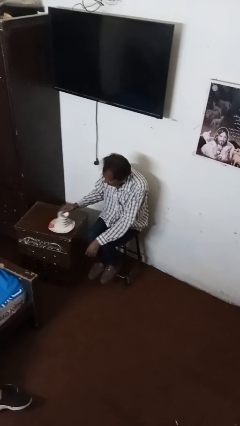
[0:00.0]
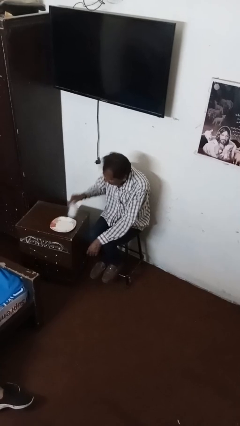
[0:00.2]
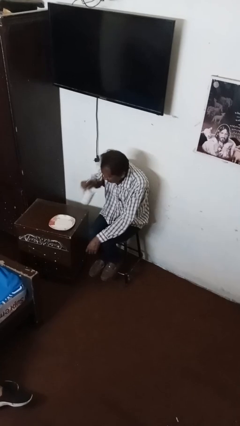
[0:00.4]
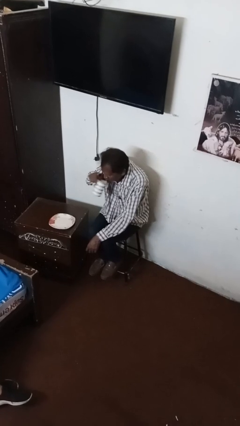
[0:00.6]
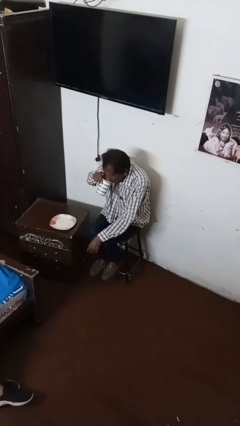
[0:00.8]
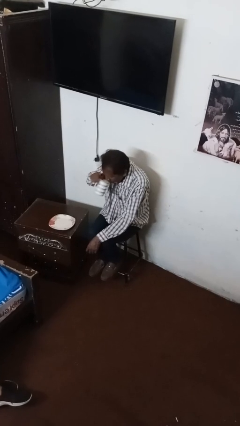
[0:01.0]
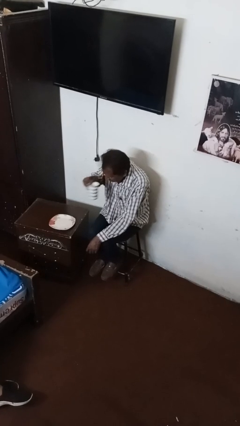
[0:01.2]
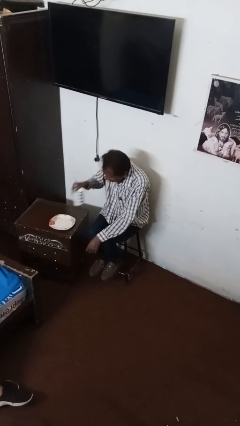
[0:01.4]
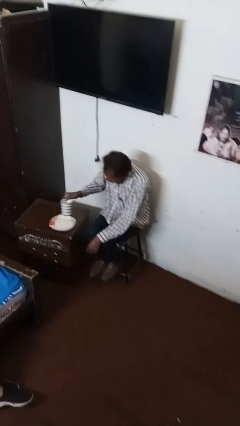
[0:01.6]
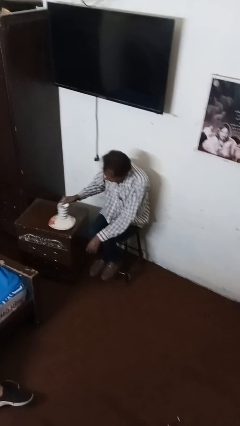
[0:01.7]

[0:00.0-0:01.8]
person drinks from mug

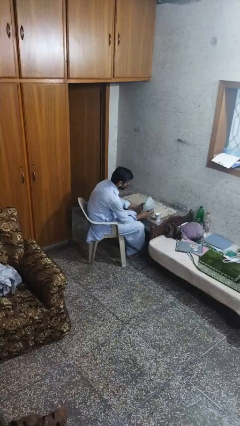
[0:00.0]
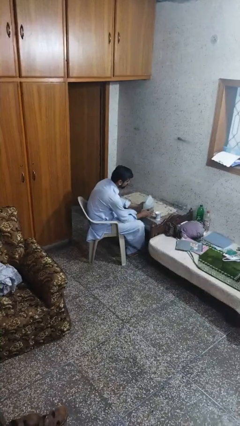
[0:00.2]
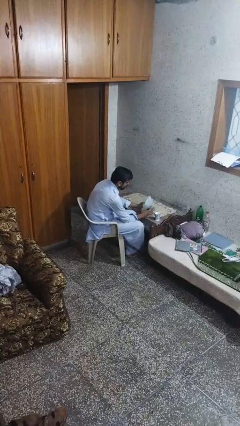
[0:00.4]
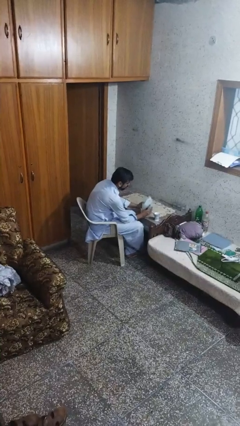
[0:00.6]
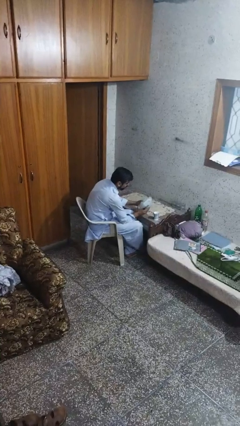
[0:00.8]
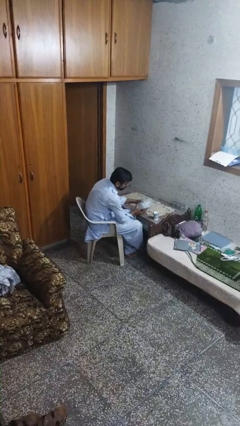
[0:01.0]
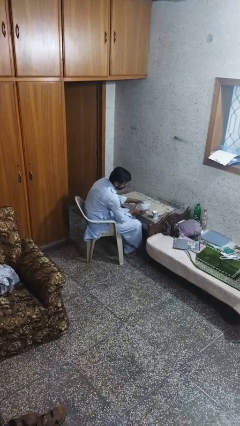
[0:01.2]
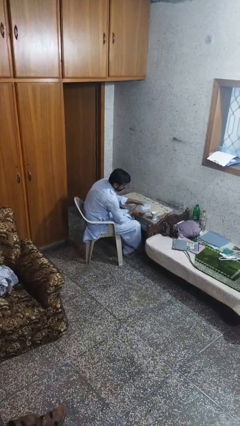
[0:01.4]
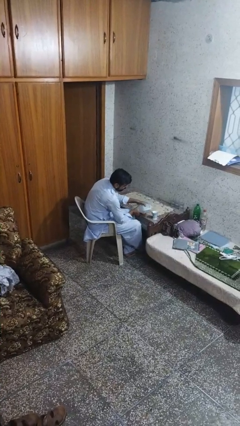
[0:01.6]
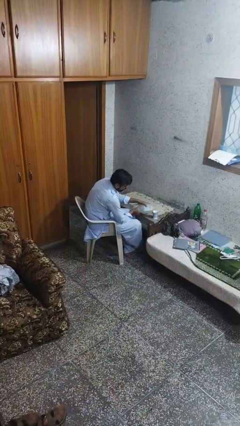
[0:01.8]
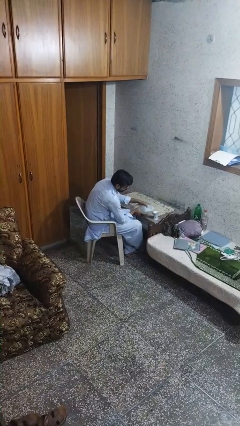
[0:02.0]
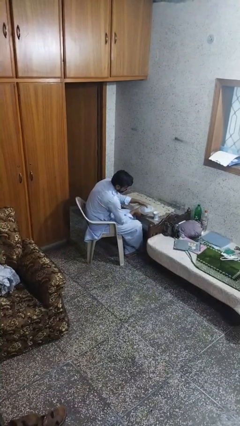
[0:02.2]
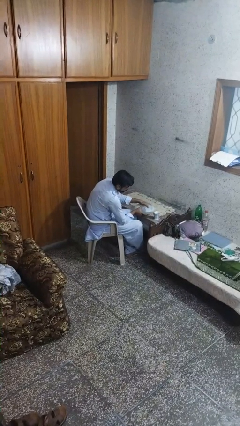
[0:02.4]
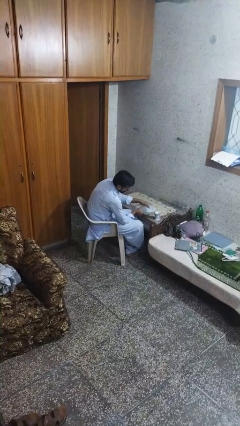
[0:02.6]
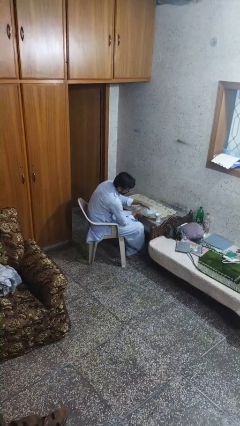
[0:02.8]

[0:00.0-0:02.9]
person pours liquid into cup

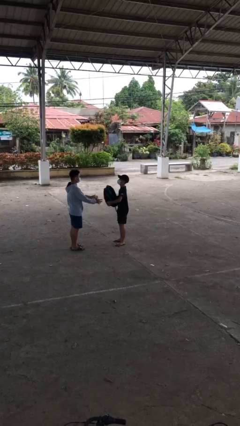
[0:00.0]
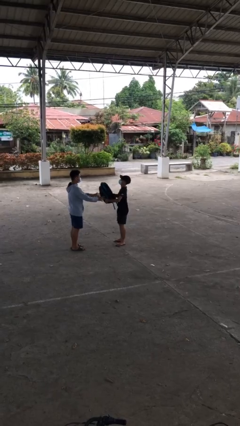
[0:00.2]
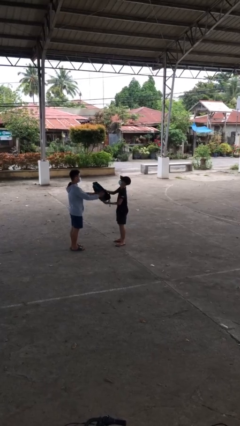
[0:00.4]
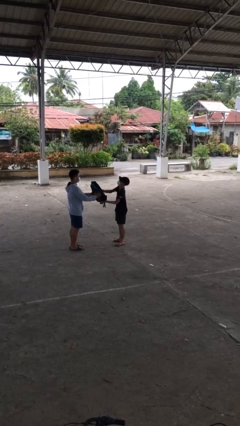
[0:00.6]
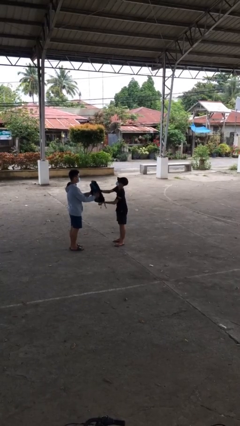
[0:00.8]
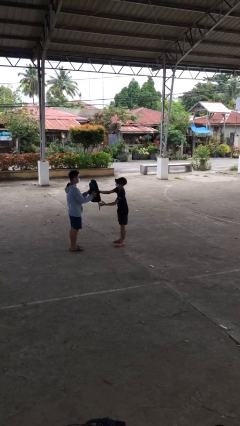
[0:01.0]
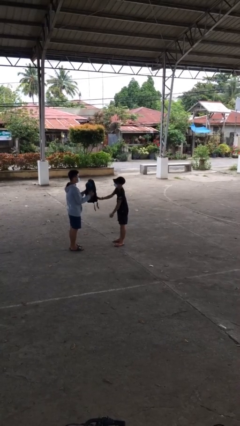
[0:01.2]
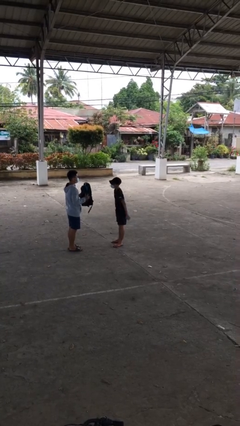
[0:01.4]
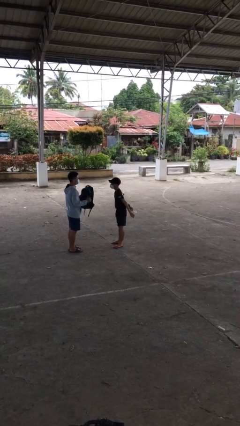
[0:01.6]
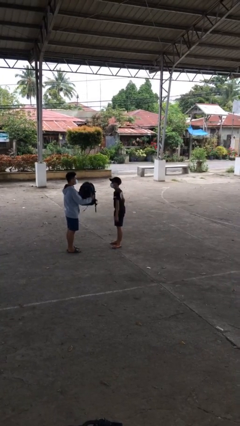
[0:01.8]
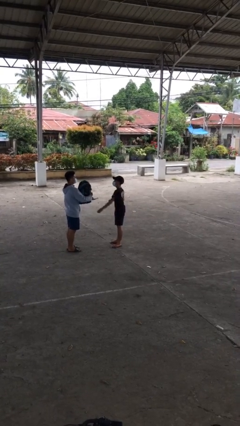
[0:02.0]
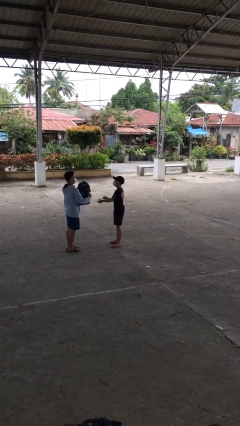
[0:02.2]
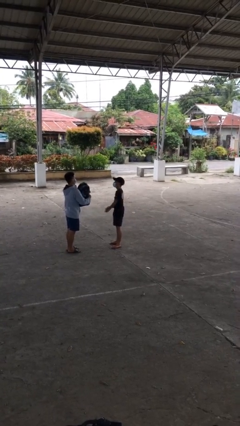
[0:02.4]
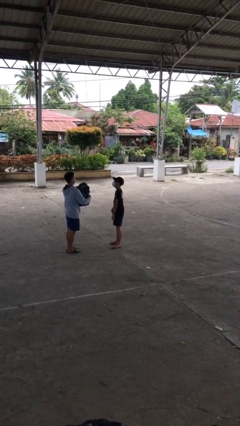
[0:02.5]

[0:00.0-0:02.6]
person transfers object to person

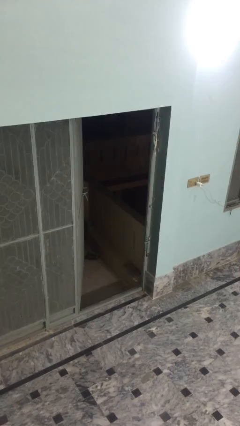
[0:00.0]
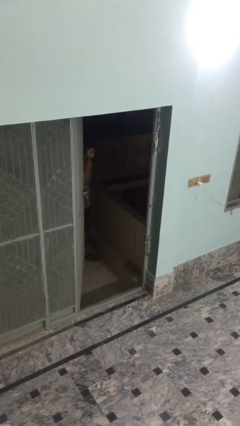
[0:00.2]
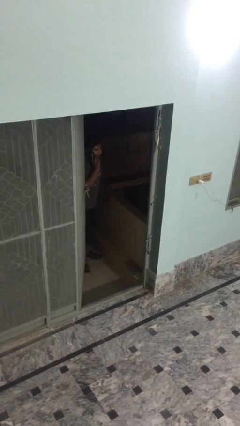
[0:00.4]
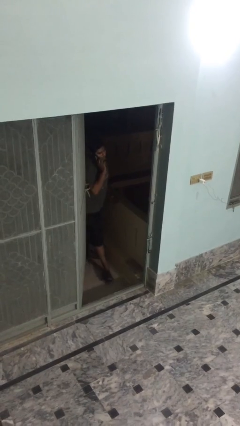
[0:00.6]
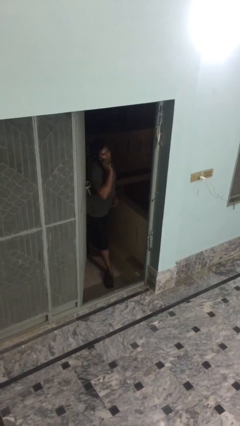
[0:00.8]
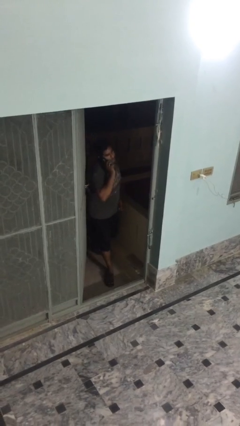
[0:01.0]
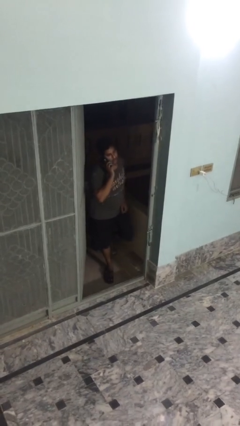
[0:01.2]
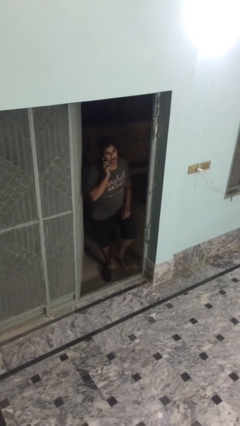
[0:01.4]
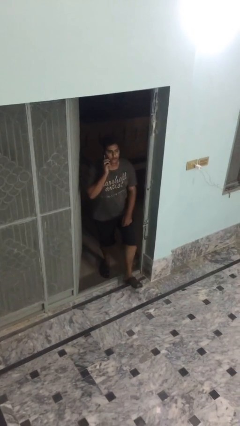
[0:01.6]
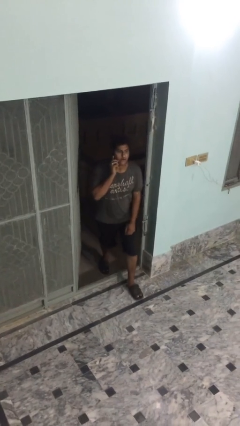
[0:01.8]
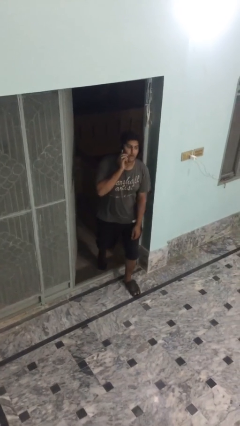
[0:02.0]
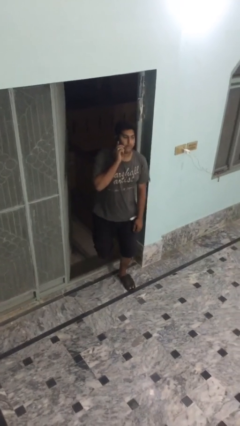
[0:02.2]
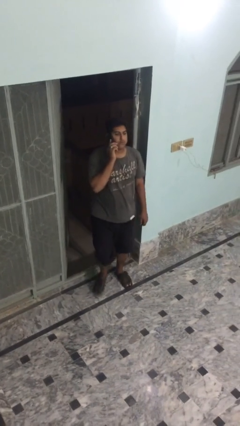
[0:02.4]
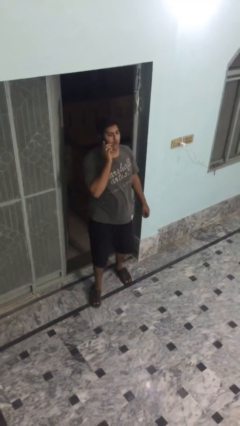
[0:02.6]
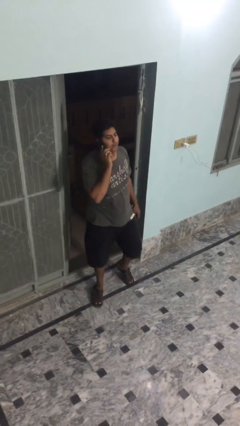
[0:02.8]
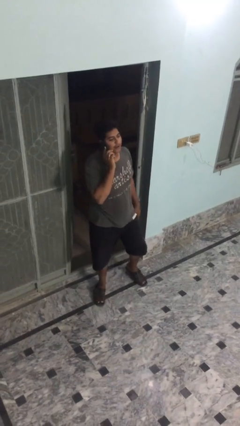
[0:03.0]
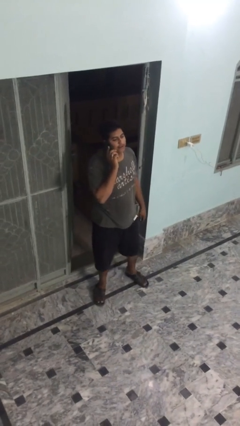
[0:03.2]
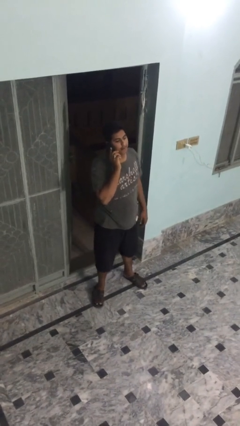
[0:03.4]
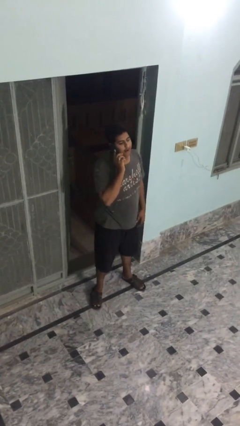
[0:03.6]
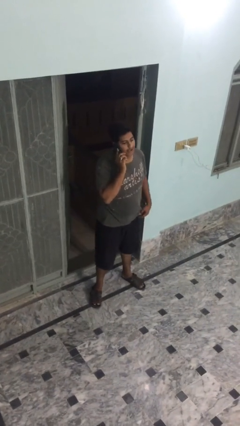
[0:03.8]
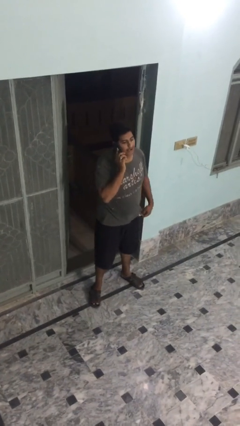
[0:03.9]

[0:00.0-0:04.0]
person enters scene through structure

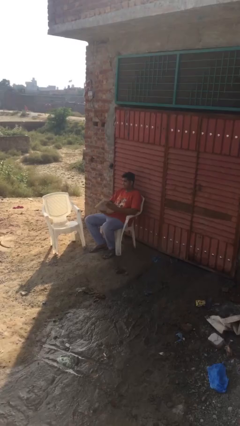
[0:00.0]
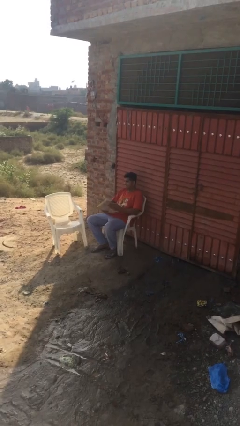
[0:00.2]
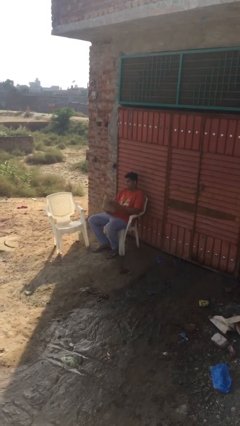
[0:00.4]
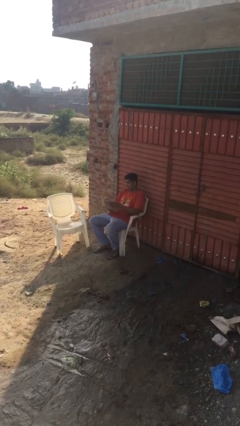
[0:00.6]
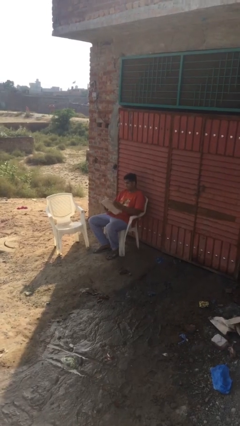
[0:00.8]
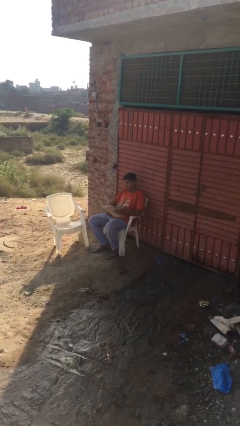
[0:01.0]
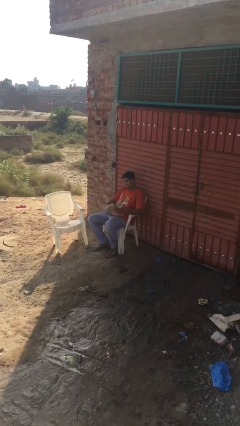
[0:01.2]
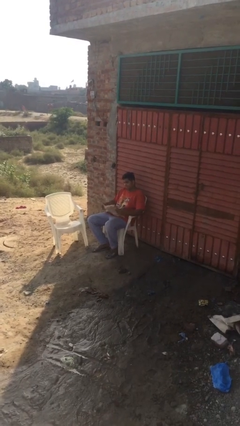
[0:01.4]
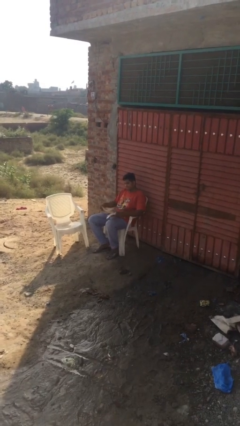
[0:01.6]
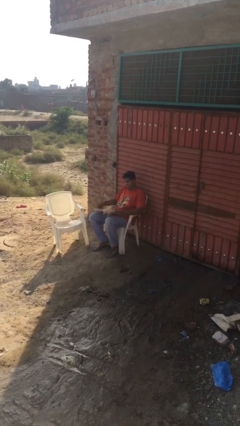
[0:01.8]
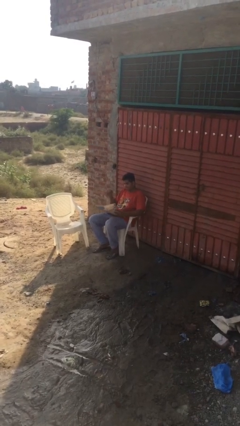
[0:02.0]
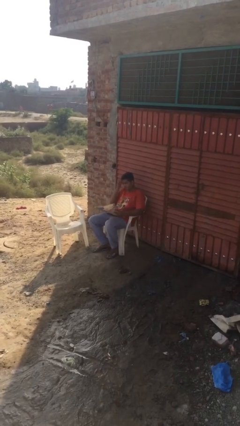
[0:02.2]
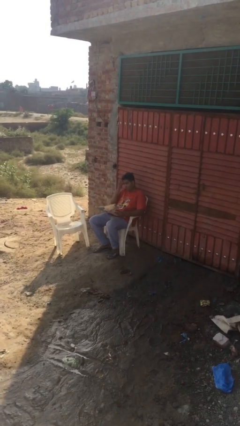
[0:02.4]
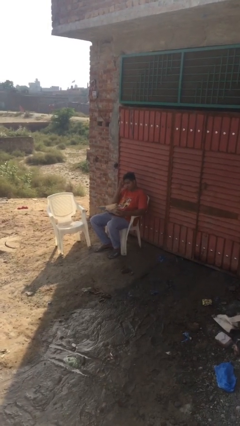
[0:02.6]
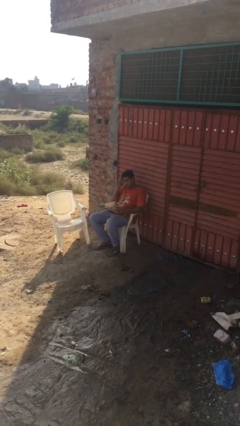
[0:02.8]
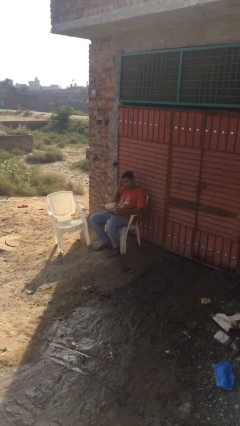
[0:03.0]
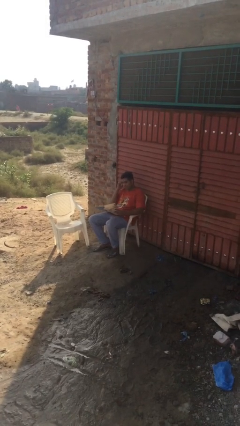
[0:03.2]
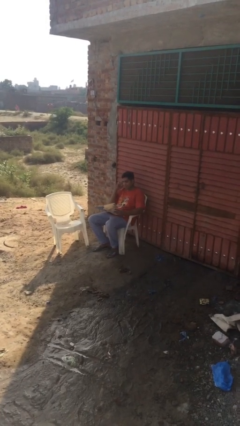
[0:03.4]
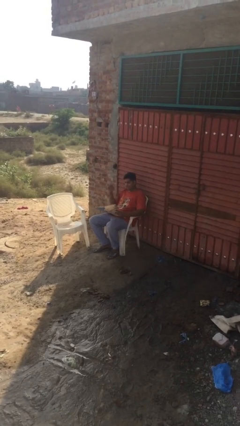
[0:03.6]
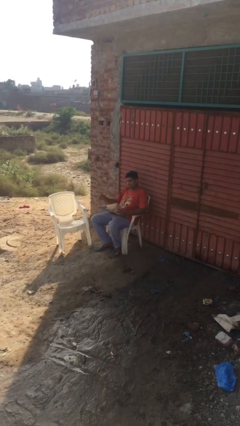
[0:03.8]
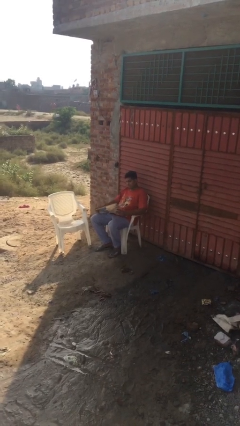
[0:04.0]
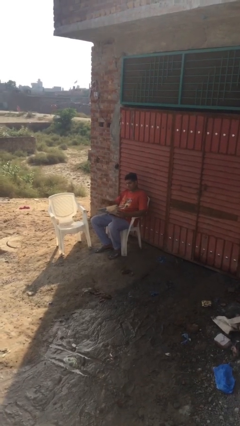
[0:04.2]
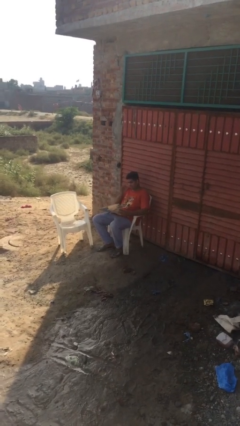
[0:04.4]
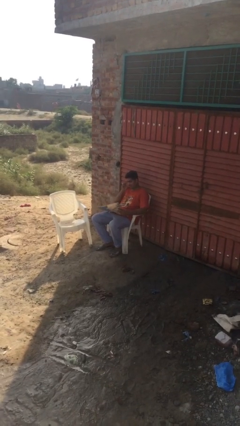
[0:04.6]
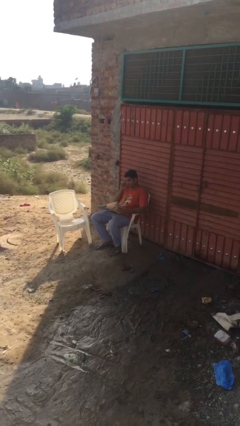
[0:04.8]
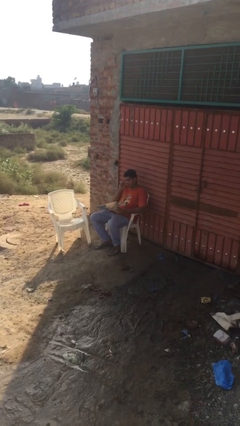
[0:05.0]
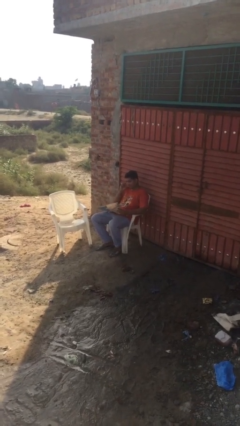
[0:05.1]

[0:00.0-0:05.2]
person reads document

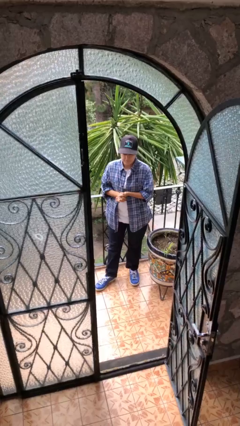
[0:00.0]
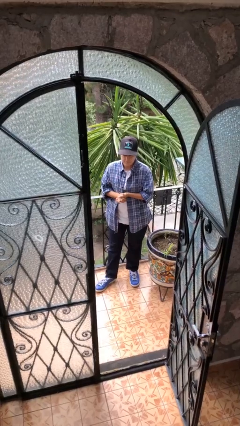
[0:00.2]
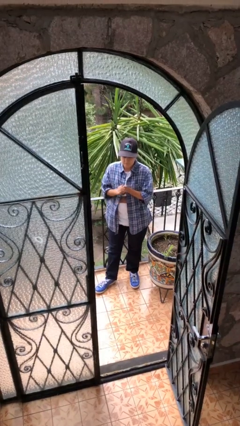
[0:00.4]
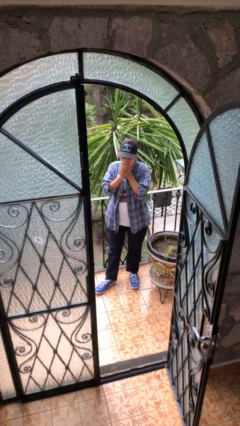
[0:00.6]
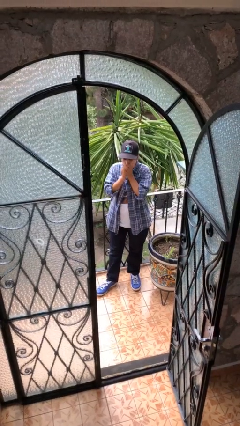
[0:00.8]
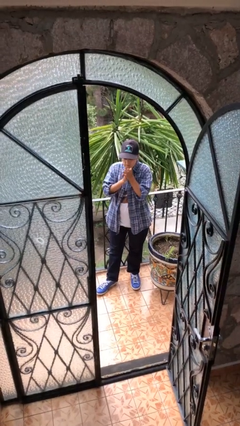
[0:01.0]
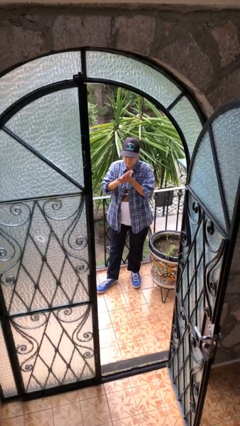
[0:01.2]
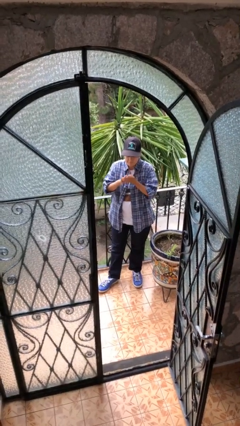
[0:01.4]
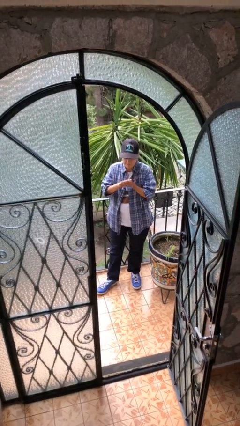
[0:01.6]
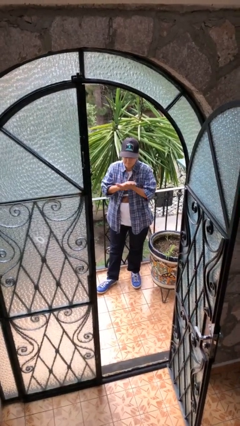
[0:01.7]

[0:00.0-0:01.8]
person blows into hands
